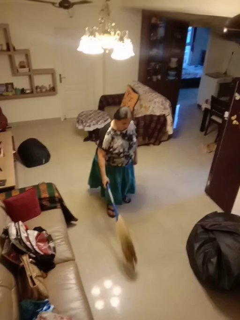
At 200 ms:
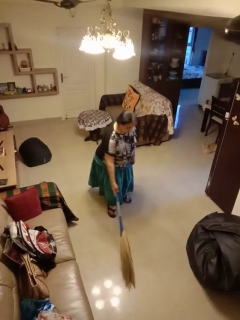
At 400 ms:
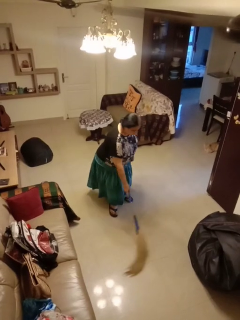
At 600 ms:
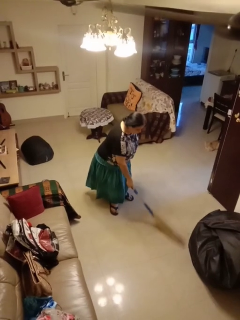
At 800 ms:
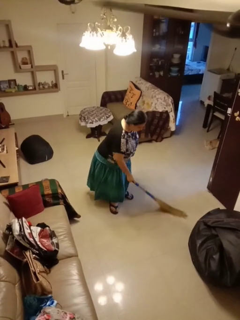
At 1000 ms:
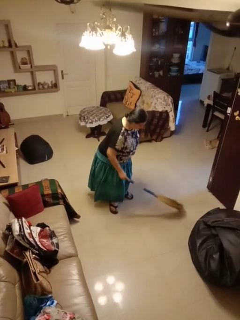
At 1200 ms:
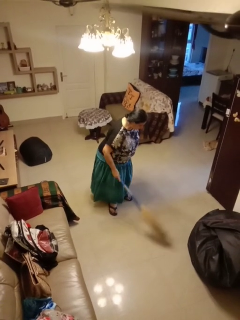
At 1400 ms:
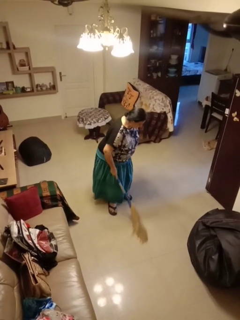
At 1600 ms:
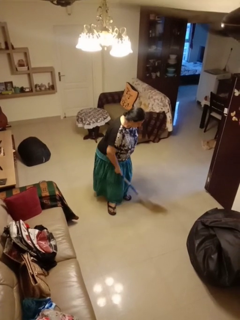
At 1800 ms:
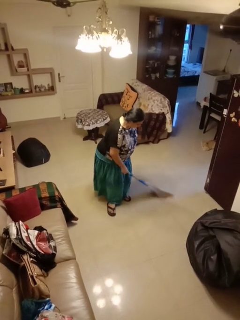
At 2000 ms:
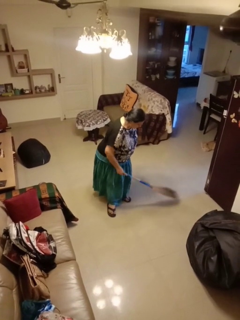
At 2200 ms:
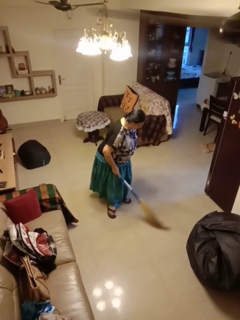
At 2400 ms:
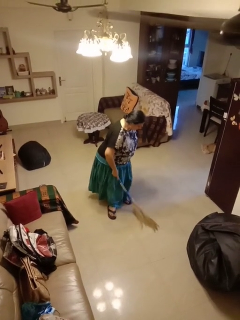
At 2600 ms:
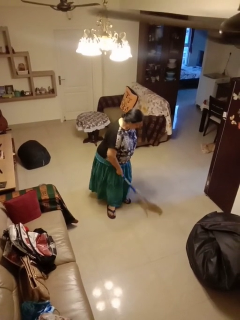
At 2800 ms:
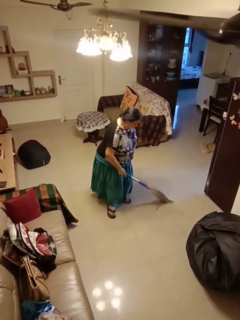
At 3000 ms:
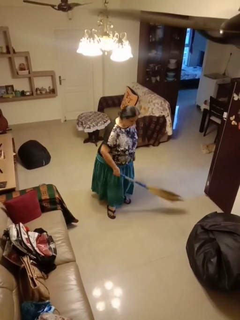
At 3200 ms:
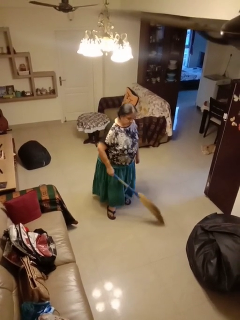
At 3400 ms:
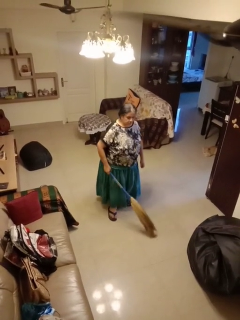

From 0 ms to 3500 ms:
person sweeps floor

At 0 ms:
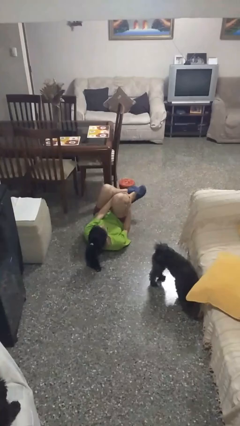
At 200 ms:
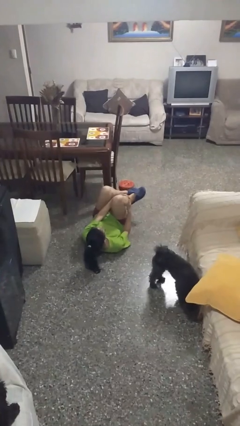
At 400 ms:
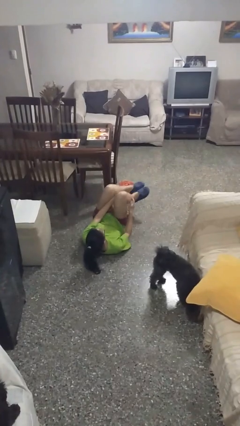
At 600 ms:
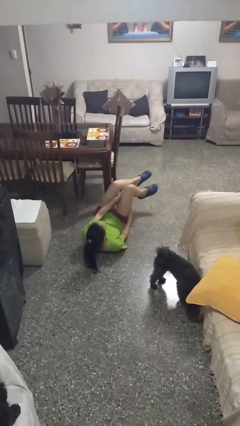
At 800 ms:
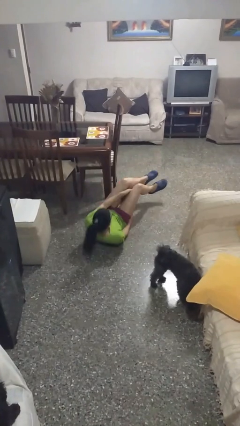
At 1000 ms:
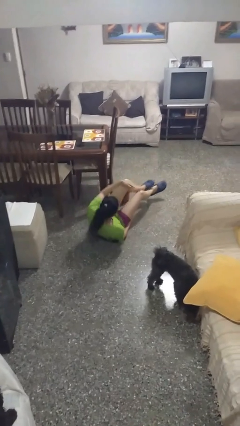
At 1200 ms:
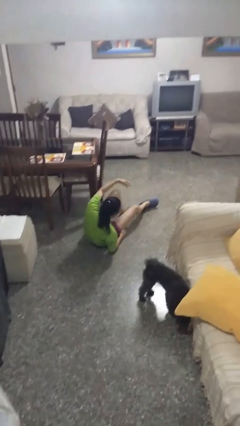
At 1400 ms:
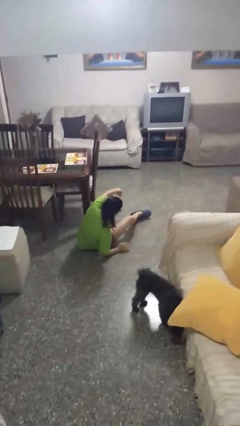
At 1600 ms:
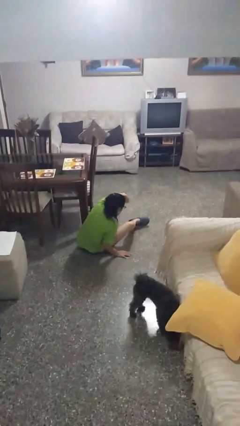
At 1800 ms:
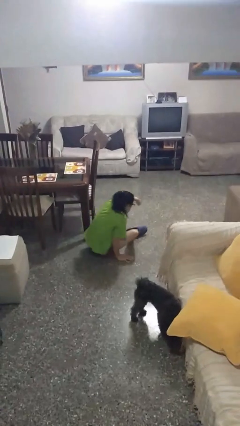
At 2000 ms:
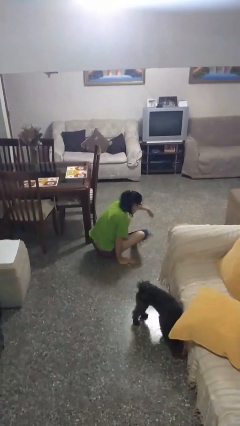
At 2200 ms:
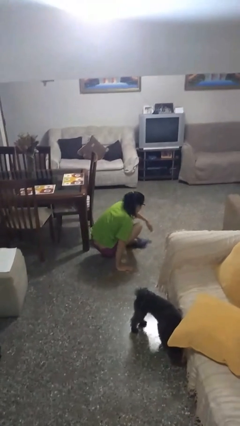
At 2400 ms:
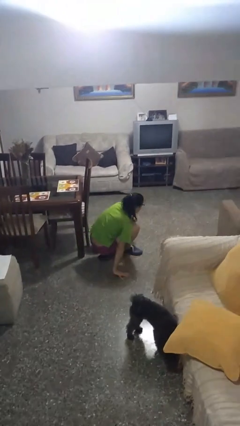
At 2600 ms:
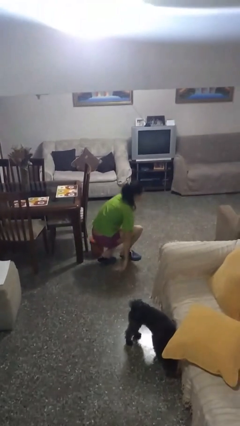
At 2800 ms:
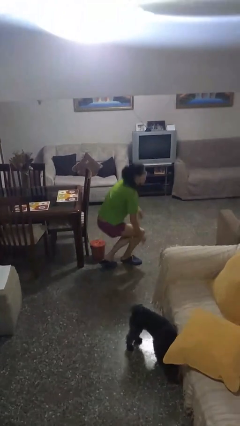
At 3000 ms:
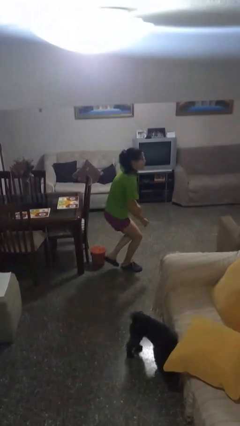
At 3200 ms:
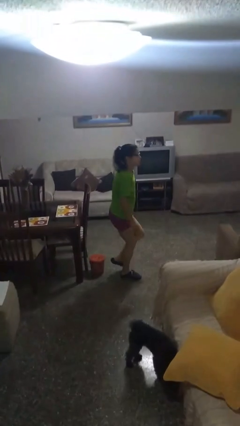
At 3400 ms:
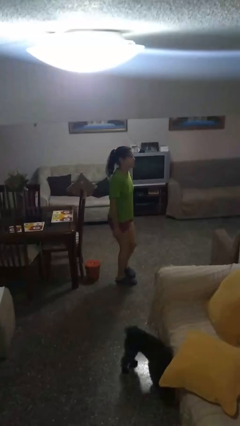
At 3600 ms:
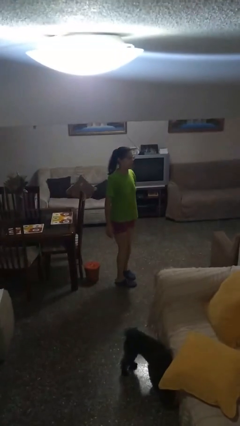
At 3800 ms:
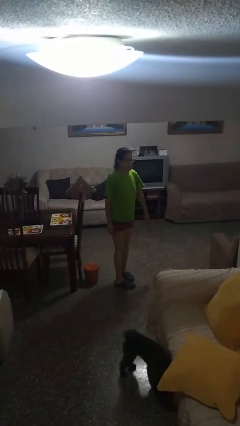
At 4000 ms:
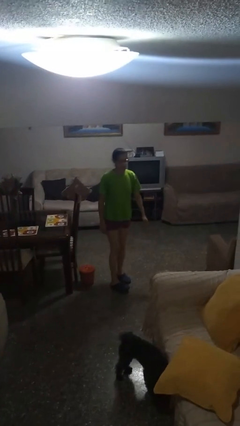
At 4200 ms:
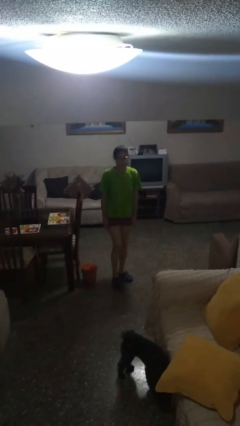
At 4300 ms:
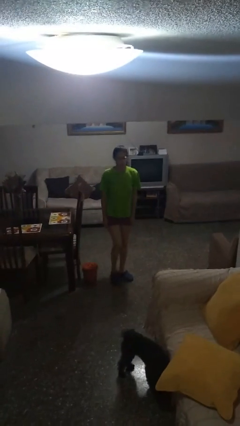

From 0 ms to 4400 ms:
person stands up from floor

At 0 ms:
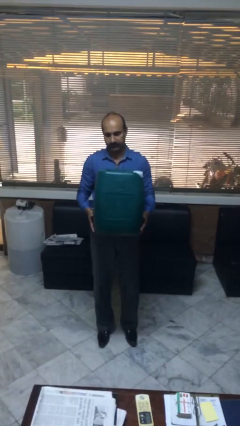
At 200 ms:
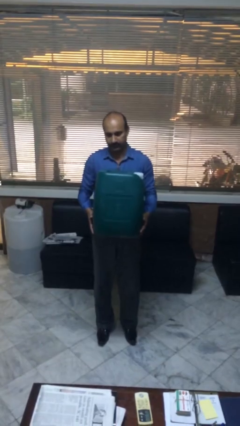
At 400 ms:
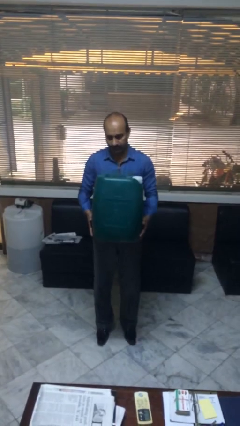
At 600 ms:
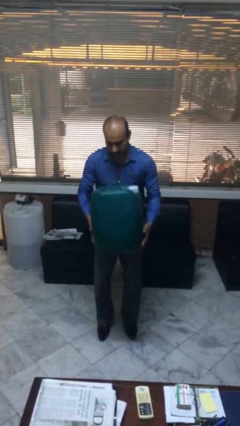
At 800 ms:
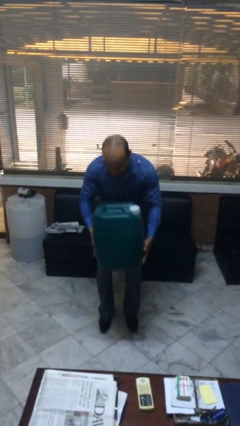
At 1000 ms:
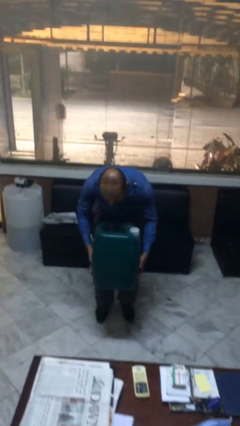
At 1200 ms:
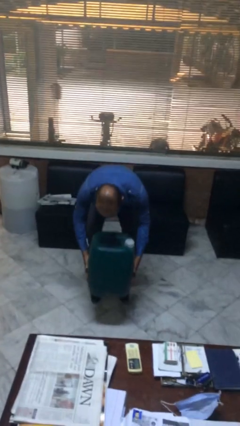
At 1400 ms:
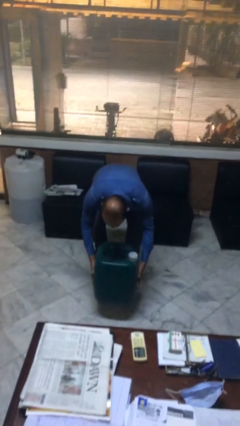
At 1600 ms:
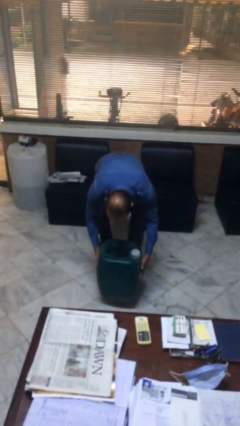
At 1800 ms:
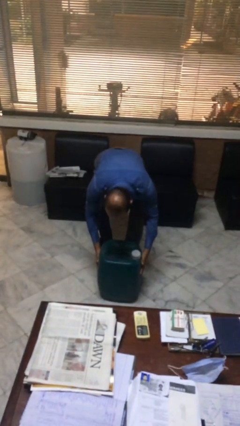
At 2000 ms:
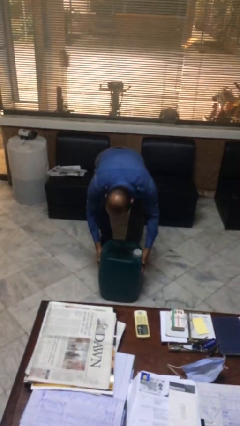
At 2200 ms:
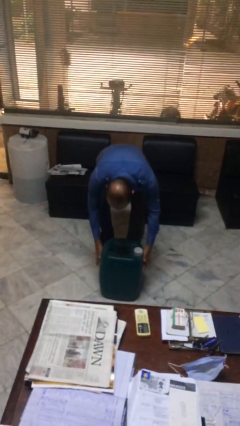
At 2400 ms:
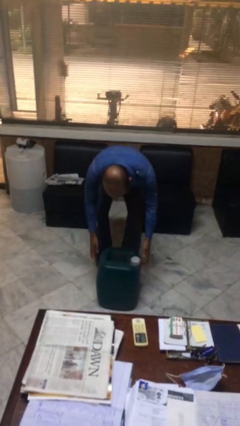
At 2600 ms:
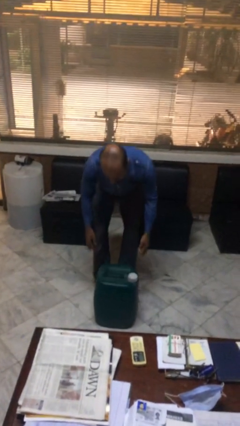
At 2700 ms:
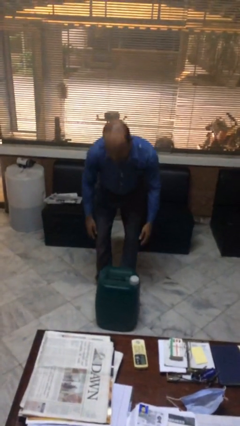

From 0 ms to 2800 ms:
person puts down object on floor

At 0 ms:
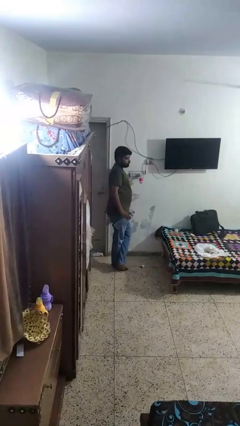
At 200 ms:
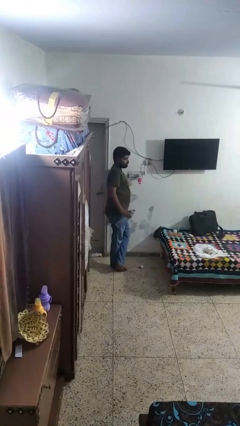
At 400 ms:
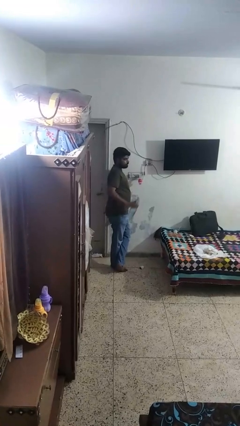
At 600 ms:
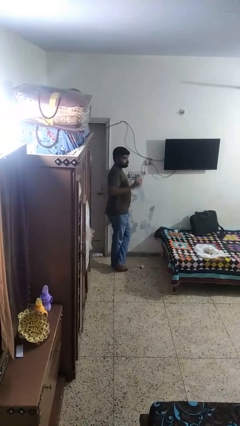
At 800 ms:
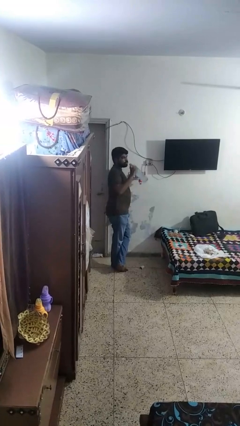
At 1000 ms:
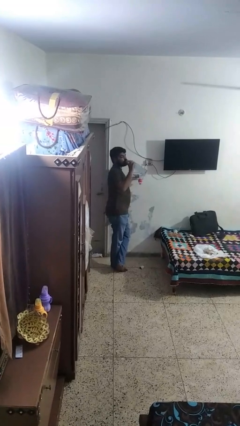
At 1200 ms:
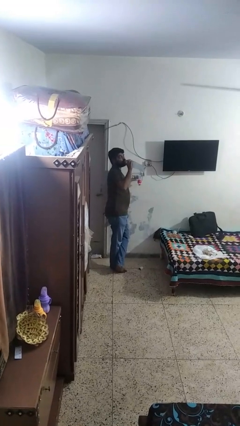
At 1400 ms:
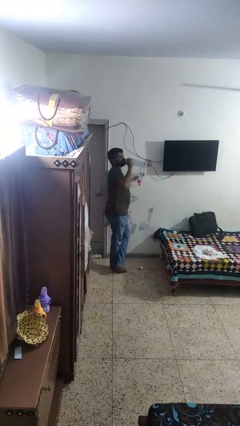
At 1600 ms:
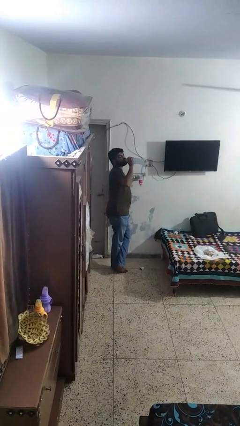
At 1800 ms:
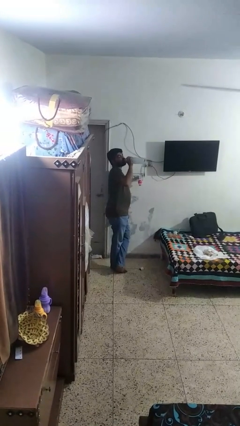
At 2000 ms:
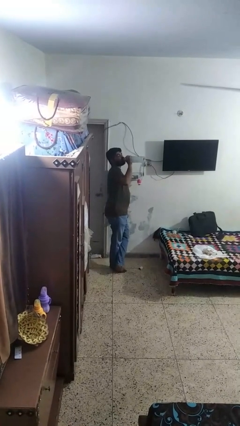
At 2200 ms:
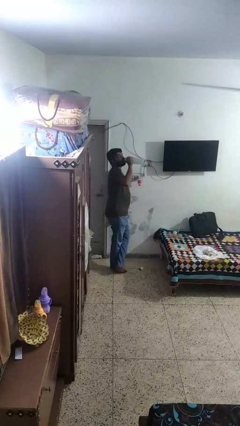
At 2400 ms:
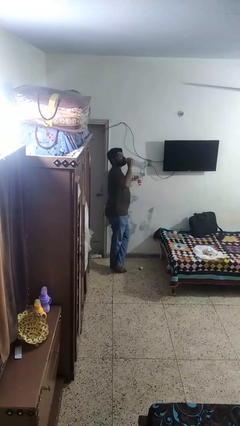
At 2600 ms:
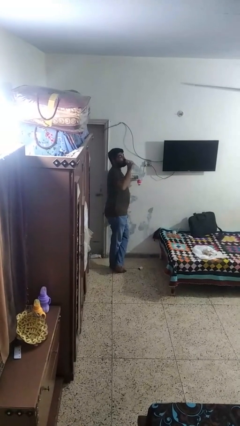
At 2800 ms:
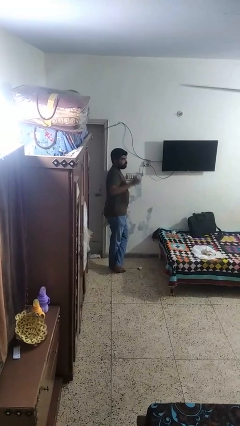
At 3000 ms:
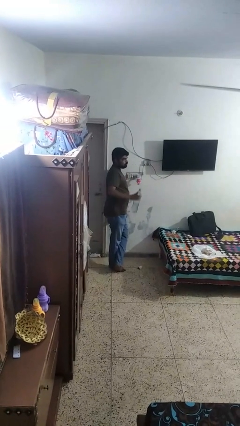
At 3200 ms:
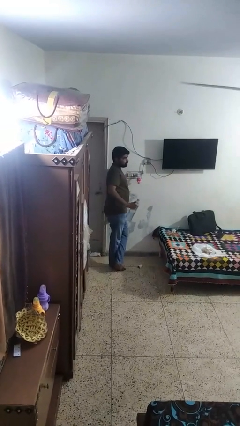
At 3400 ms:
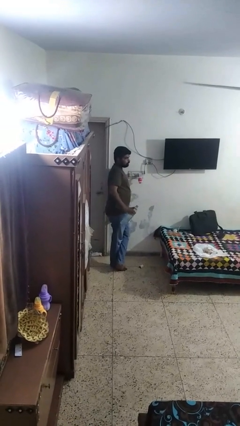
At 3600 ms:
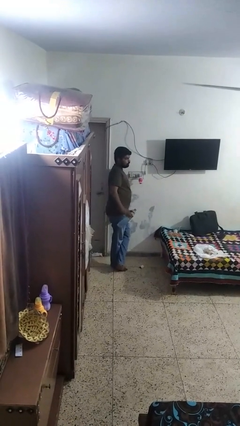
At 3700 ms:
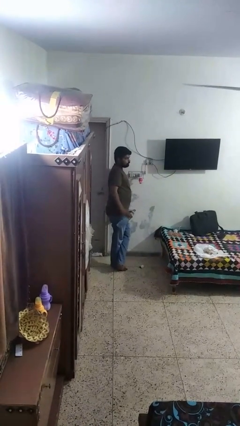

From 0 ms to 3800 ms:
person drinks from bottle

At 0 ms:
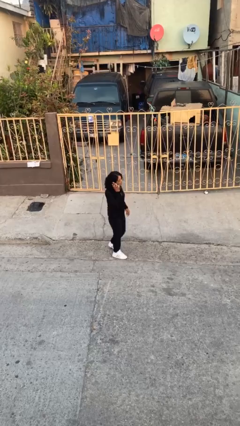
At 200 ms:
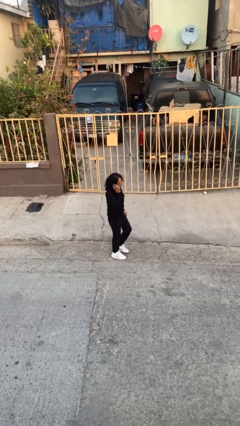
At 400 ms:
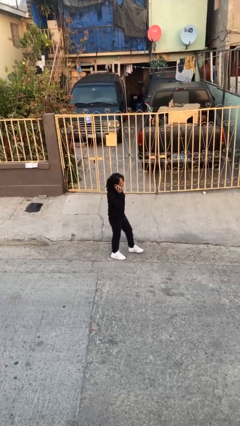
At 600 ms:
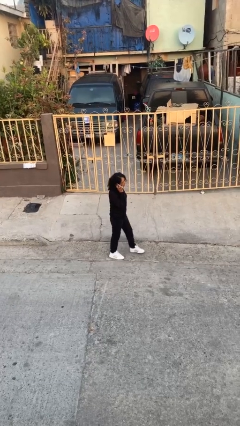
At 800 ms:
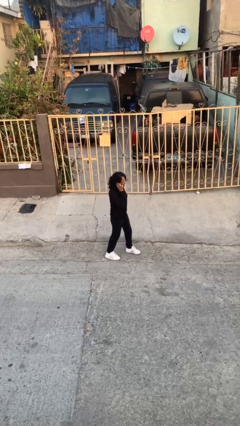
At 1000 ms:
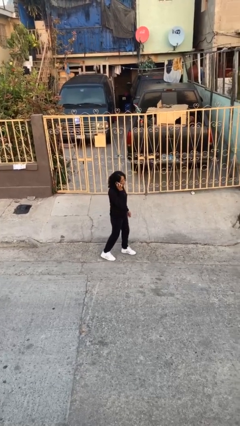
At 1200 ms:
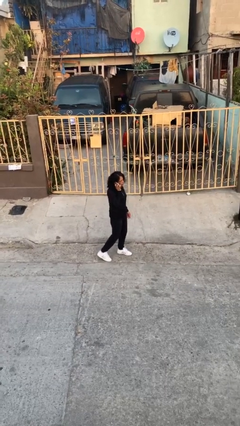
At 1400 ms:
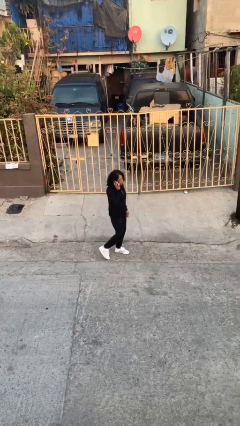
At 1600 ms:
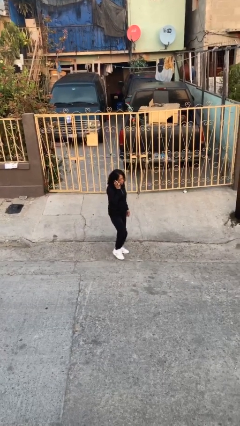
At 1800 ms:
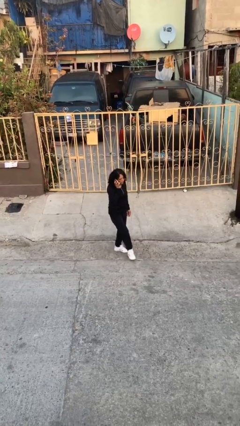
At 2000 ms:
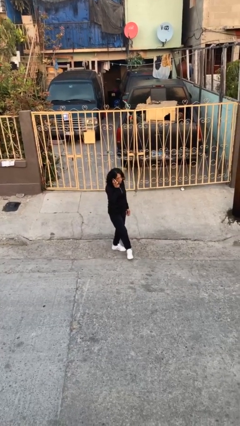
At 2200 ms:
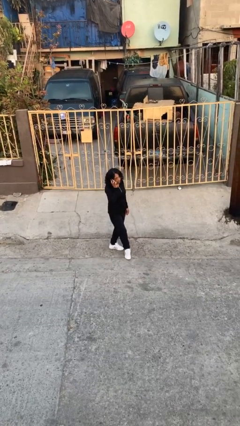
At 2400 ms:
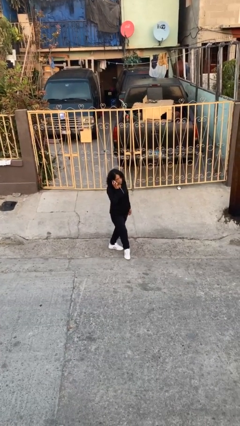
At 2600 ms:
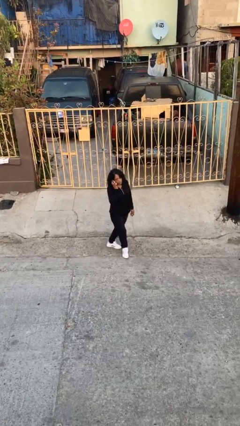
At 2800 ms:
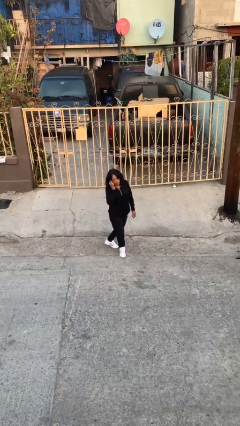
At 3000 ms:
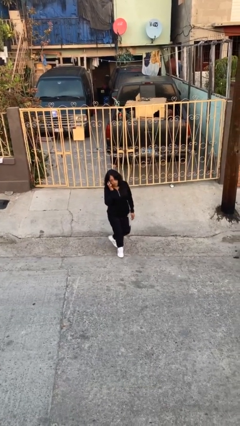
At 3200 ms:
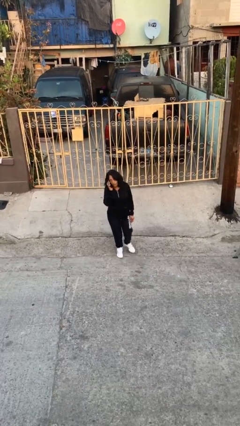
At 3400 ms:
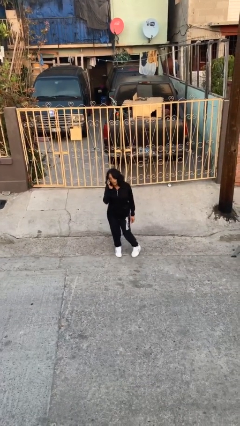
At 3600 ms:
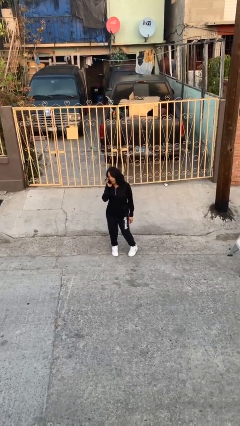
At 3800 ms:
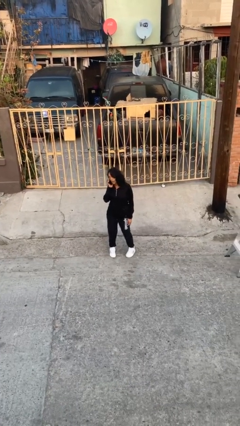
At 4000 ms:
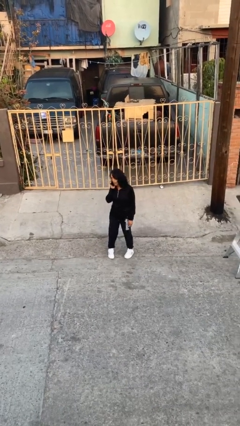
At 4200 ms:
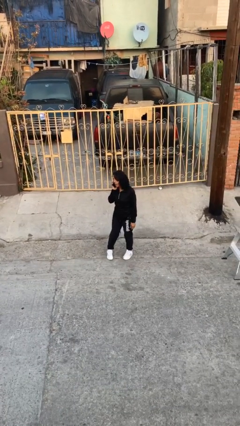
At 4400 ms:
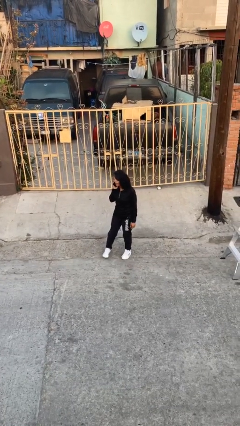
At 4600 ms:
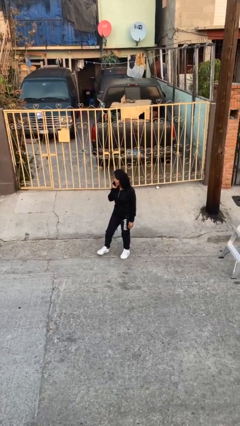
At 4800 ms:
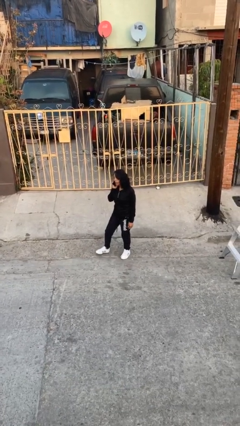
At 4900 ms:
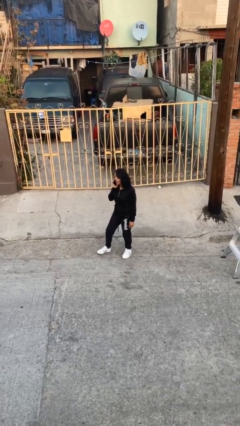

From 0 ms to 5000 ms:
person talks on phone
